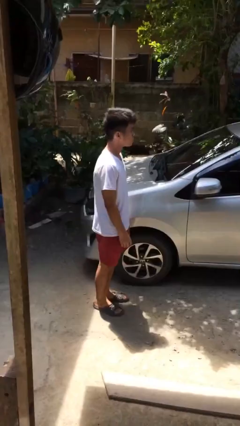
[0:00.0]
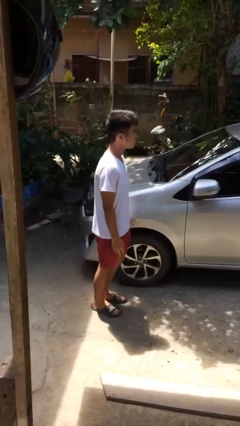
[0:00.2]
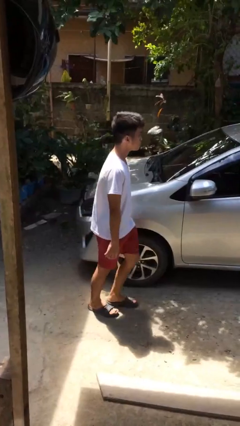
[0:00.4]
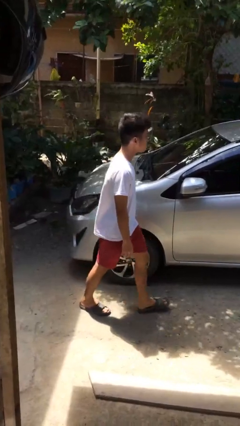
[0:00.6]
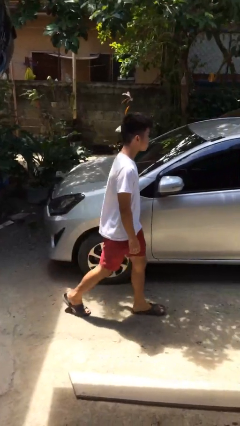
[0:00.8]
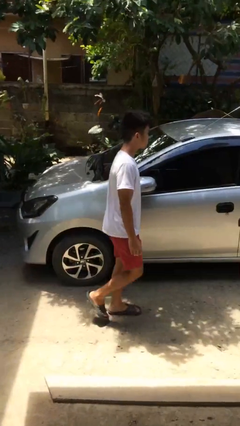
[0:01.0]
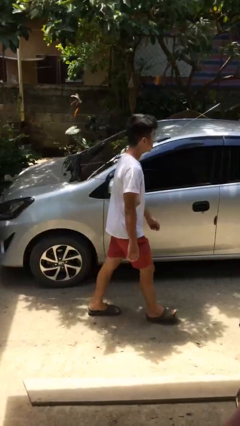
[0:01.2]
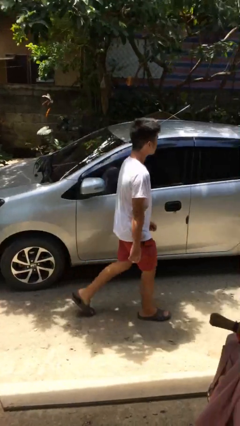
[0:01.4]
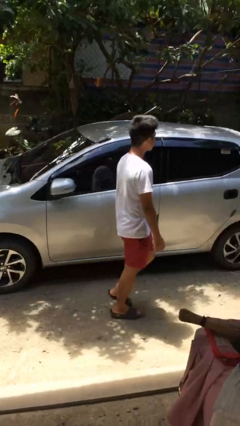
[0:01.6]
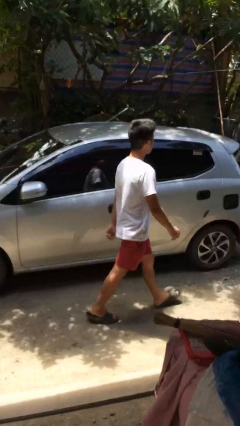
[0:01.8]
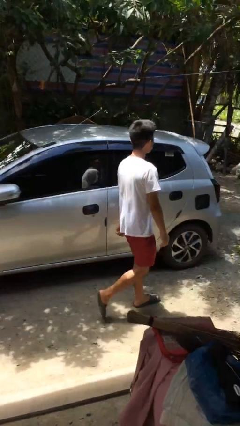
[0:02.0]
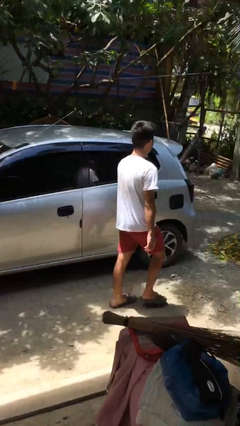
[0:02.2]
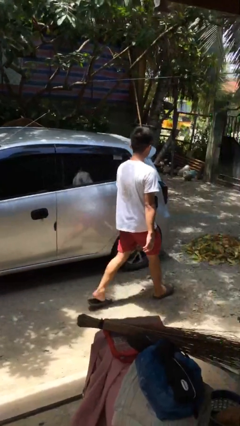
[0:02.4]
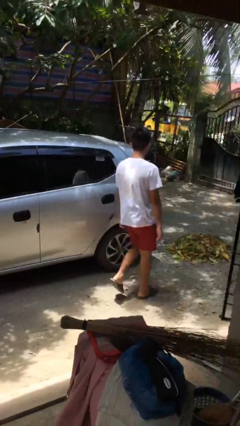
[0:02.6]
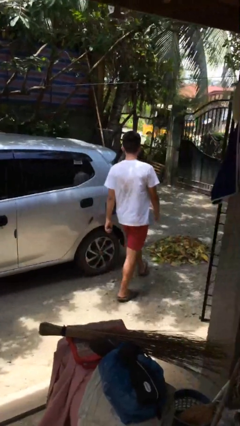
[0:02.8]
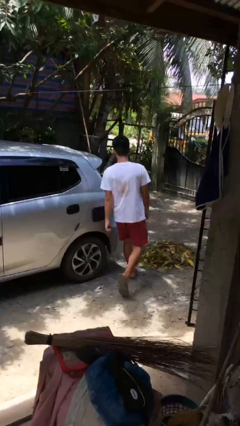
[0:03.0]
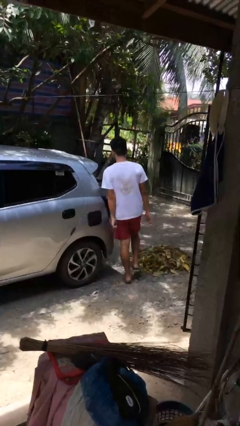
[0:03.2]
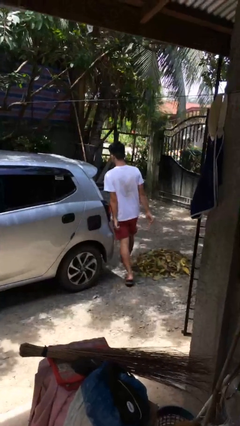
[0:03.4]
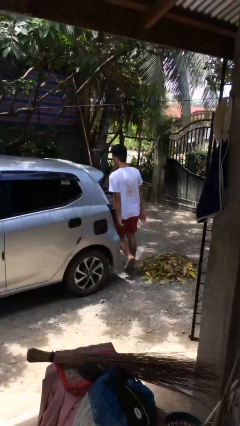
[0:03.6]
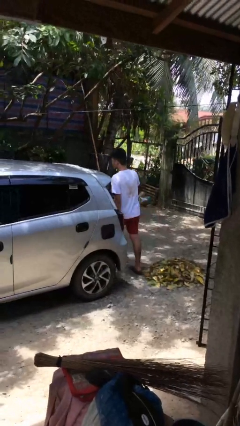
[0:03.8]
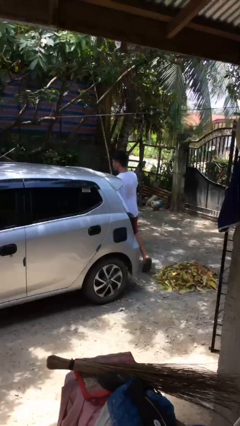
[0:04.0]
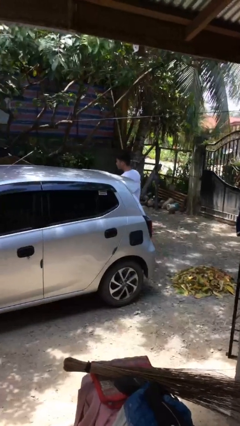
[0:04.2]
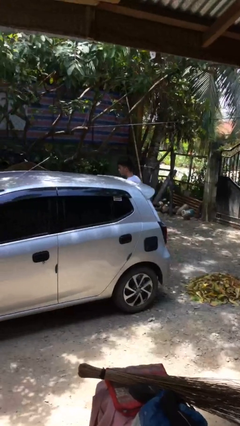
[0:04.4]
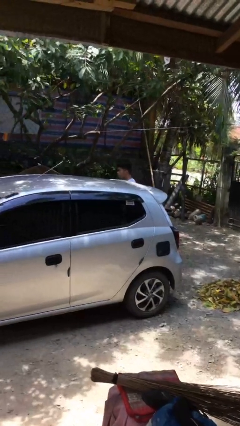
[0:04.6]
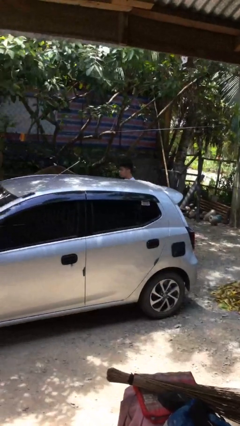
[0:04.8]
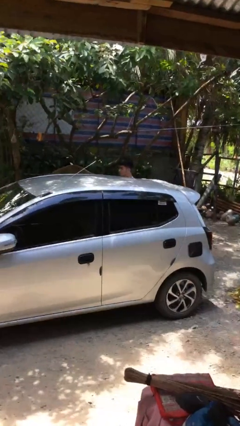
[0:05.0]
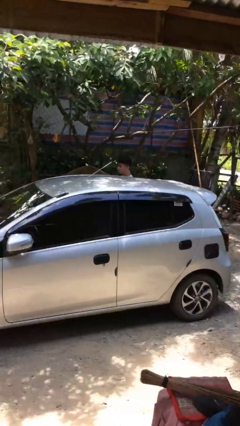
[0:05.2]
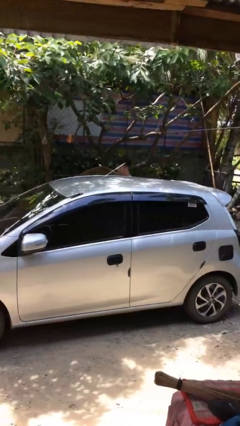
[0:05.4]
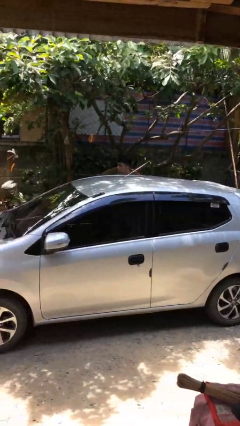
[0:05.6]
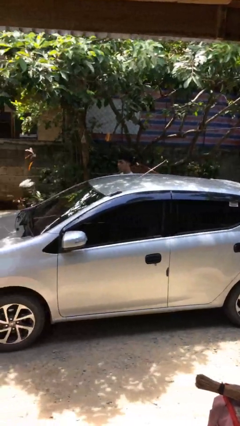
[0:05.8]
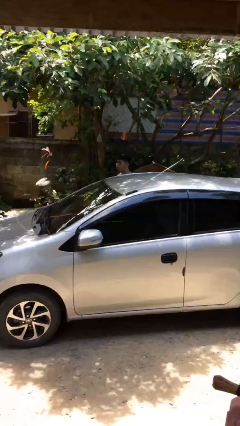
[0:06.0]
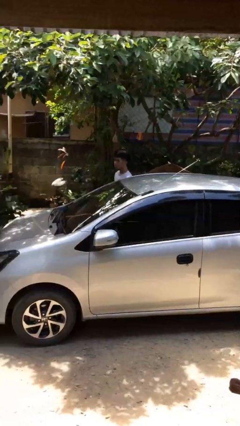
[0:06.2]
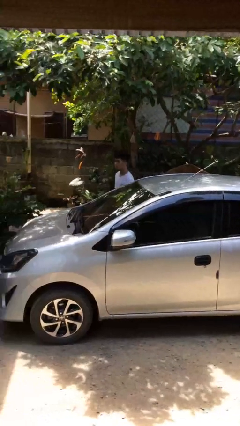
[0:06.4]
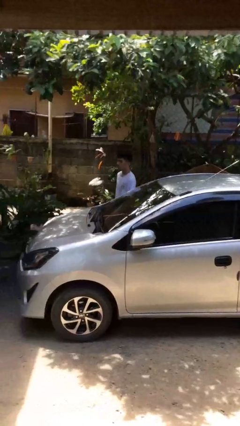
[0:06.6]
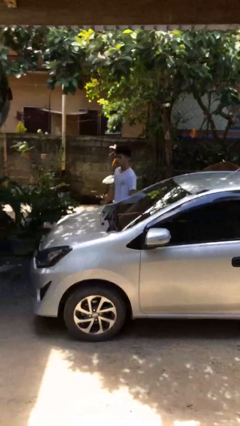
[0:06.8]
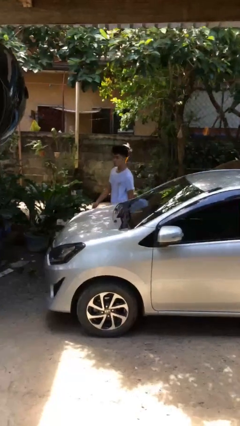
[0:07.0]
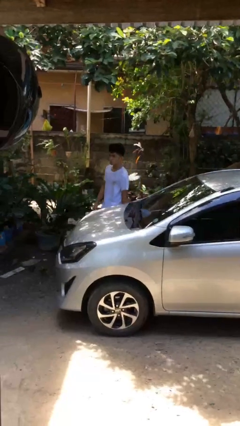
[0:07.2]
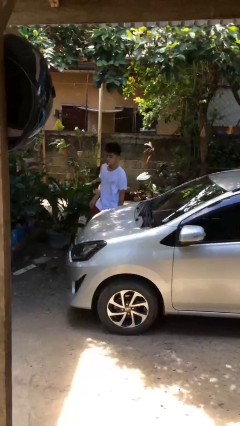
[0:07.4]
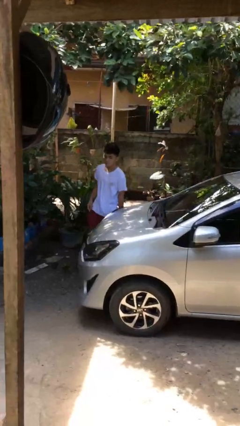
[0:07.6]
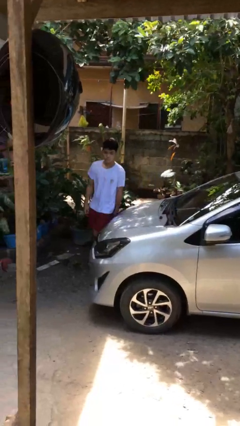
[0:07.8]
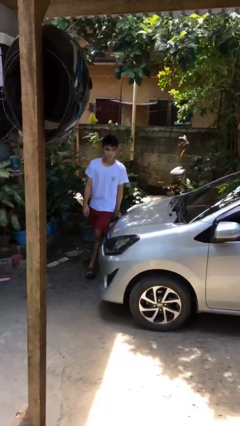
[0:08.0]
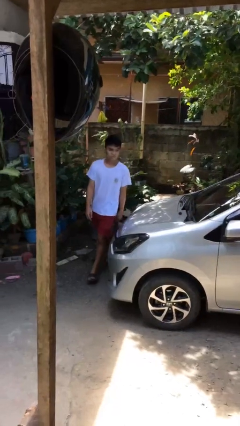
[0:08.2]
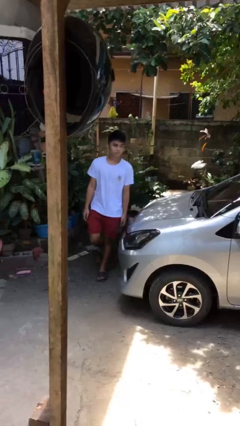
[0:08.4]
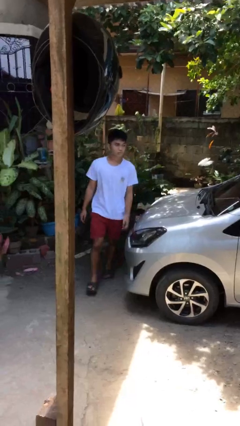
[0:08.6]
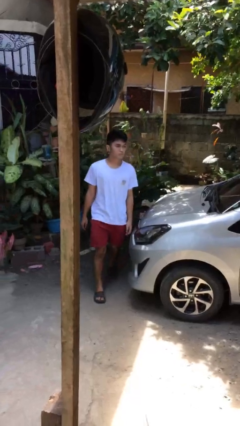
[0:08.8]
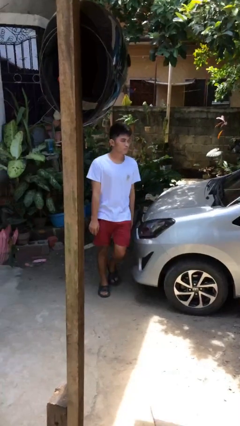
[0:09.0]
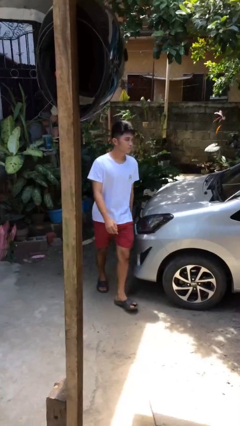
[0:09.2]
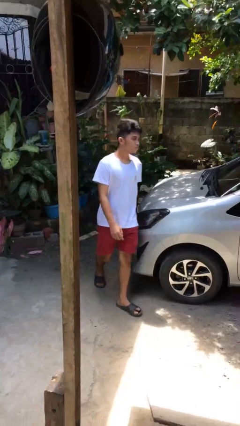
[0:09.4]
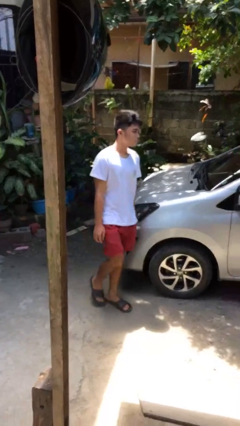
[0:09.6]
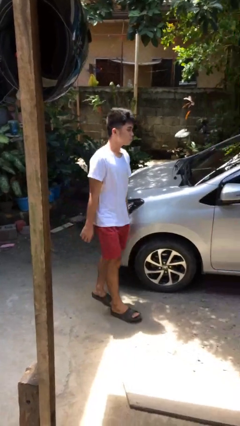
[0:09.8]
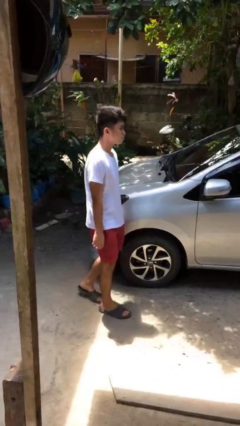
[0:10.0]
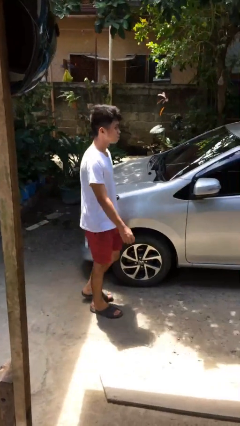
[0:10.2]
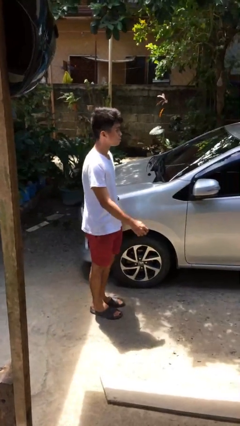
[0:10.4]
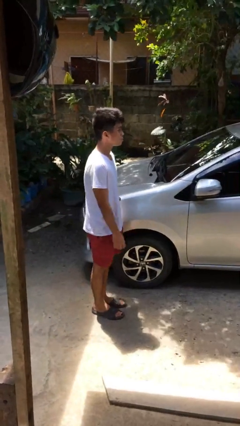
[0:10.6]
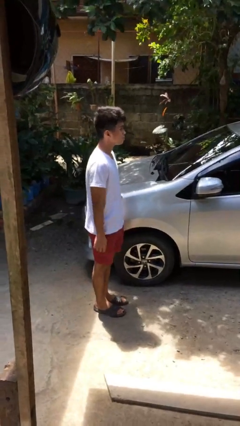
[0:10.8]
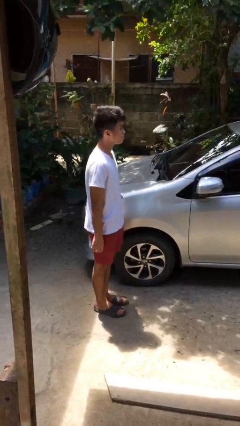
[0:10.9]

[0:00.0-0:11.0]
person walks around car

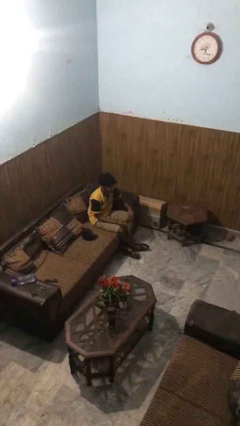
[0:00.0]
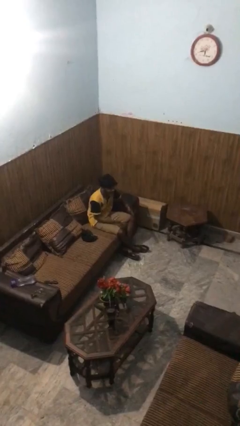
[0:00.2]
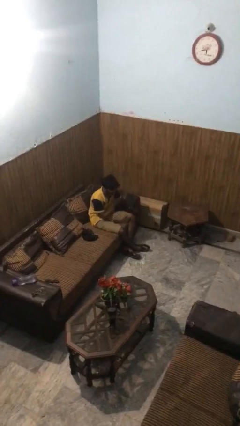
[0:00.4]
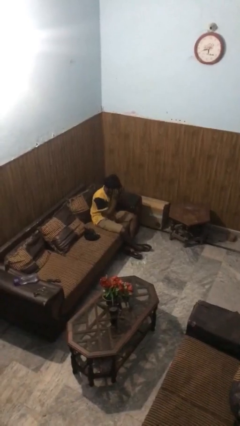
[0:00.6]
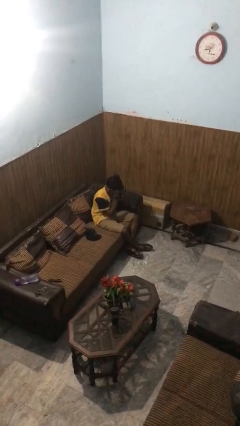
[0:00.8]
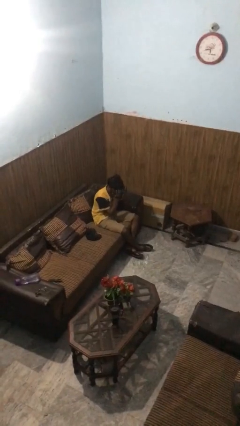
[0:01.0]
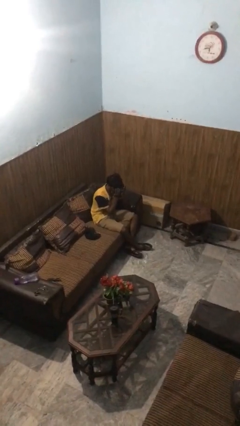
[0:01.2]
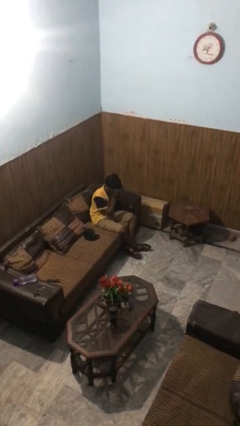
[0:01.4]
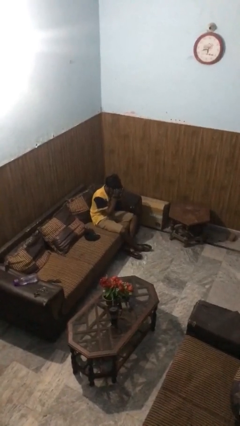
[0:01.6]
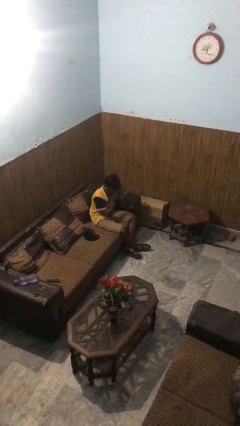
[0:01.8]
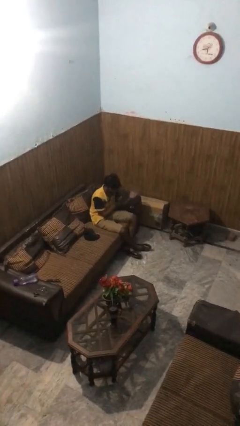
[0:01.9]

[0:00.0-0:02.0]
person covers face with hands

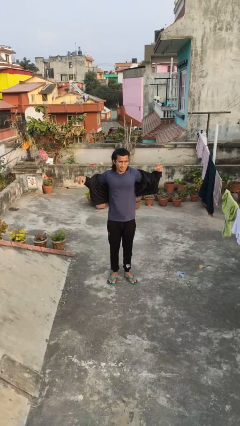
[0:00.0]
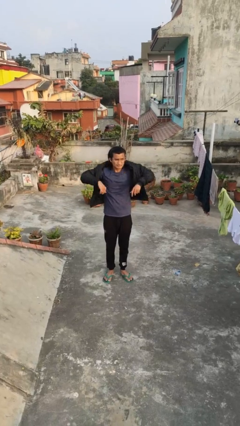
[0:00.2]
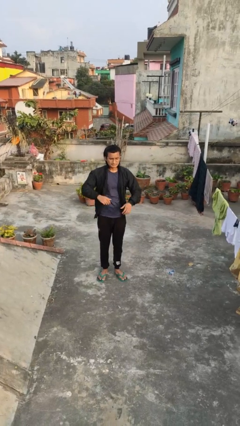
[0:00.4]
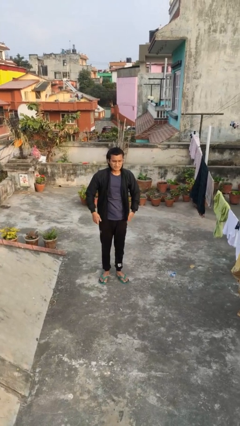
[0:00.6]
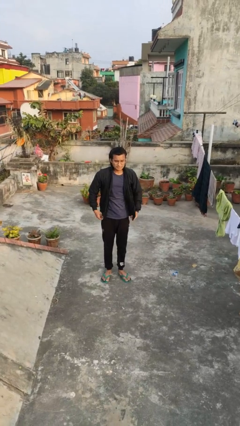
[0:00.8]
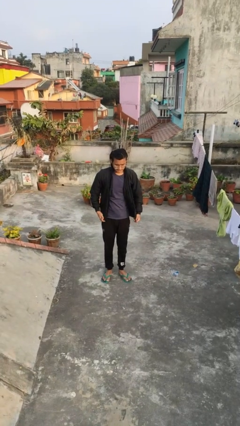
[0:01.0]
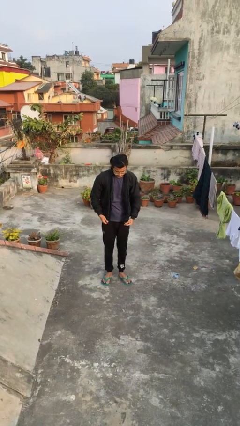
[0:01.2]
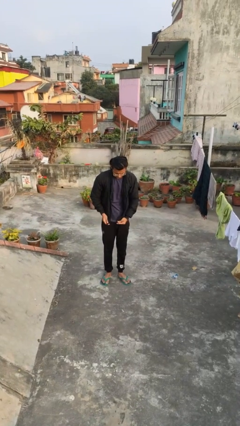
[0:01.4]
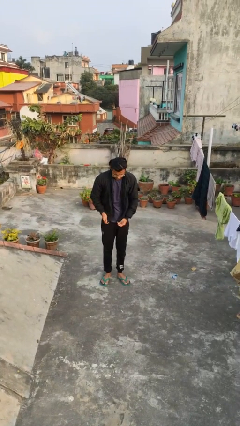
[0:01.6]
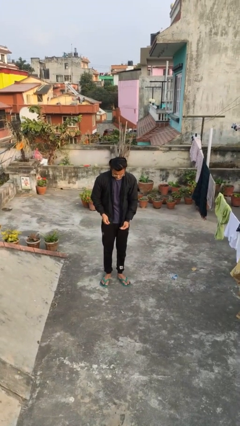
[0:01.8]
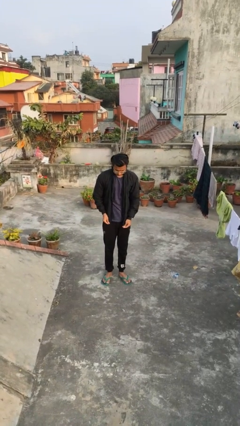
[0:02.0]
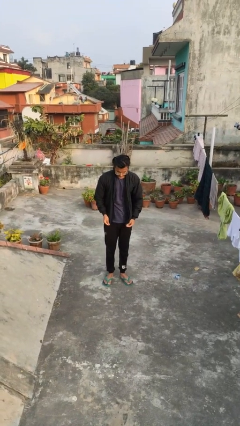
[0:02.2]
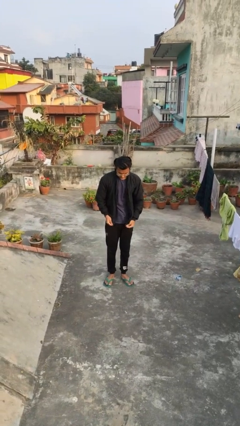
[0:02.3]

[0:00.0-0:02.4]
person puts on jacket

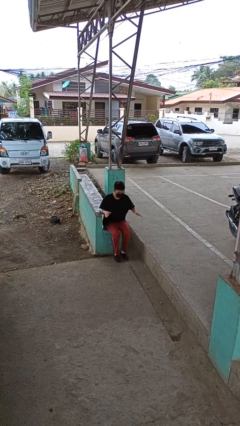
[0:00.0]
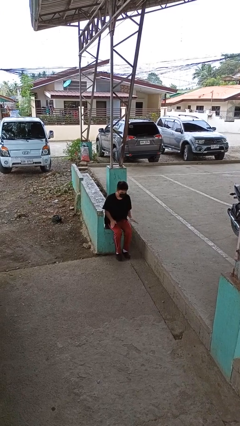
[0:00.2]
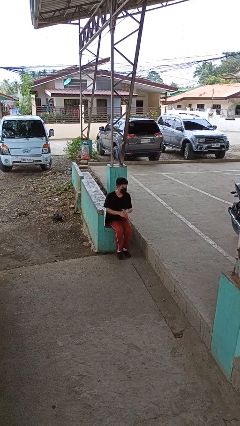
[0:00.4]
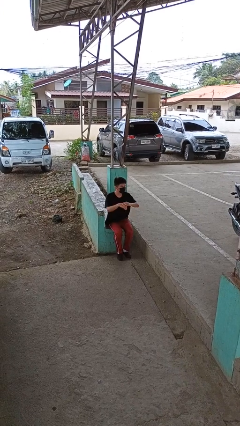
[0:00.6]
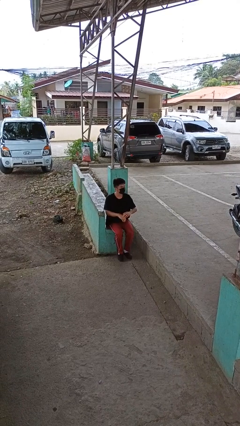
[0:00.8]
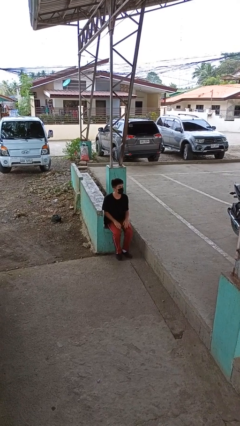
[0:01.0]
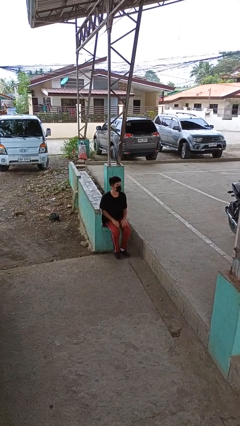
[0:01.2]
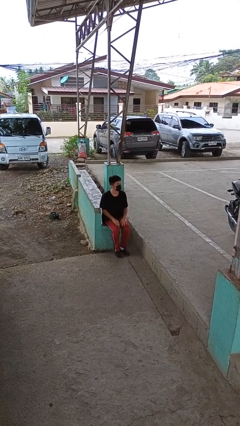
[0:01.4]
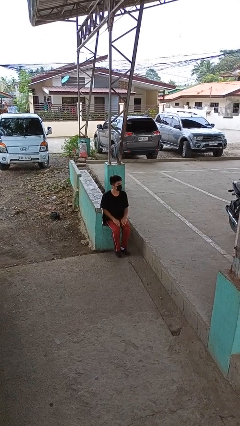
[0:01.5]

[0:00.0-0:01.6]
person slaps hands on thighs

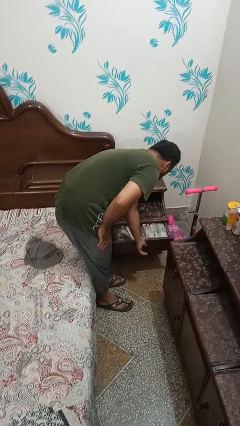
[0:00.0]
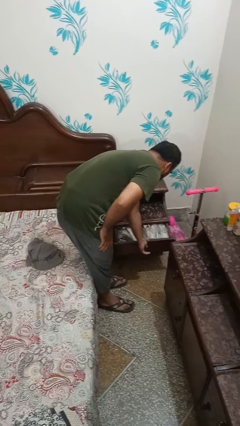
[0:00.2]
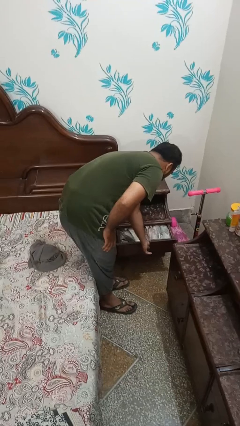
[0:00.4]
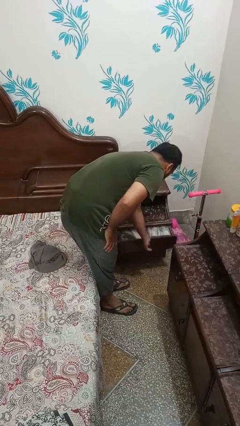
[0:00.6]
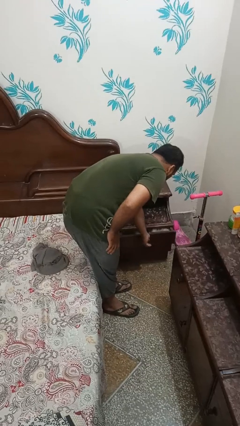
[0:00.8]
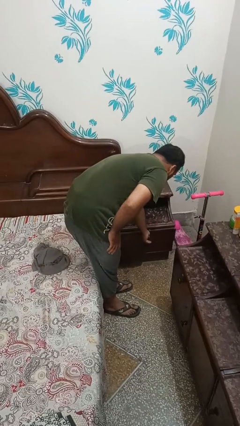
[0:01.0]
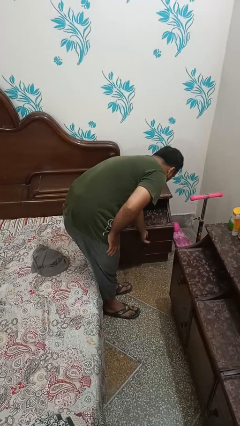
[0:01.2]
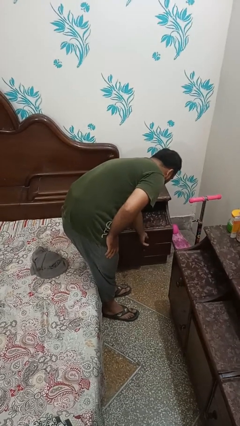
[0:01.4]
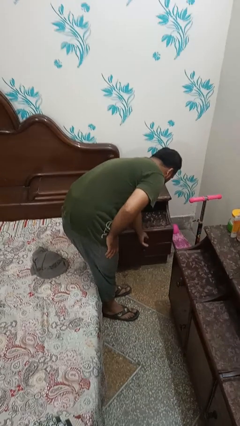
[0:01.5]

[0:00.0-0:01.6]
person closes dresser drawer
